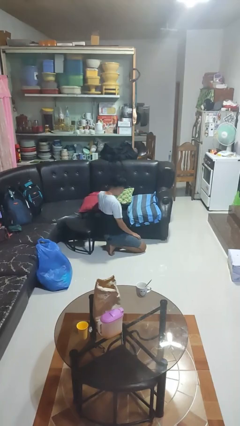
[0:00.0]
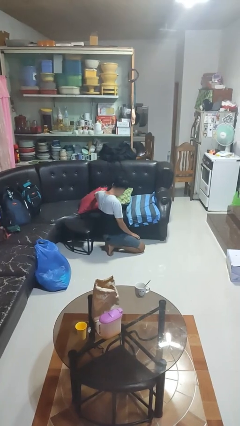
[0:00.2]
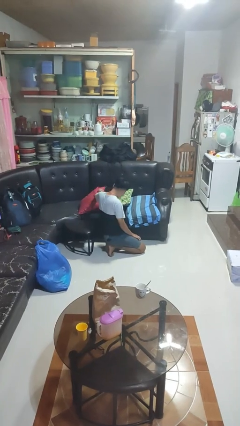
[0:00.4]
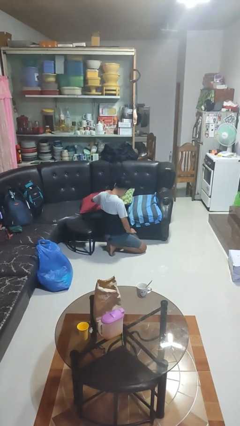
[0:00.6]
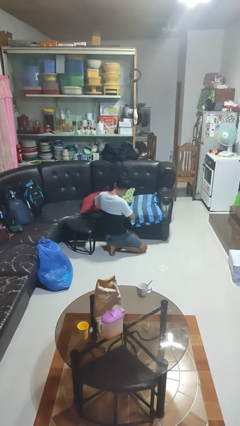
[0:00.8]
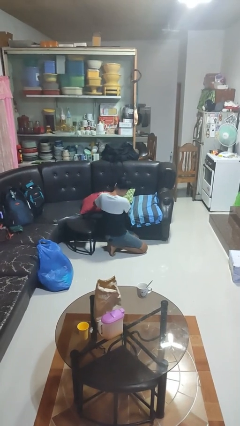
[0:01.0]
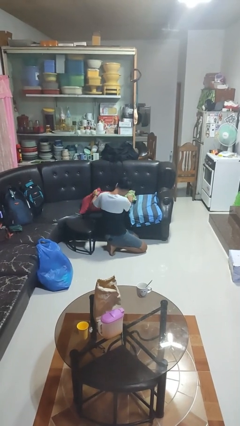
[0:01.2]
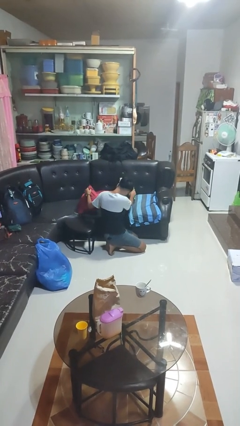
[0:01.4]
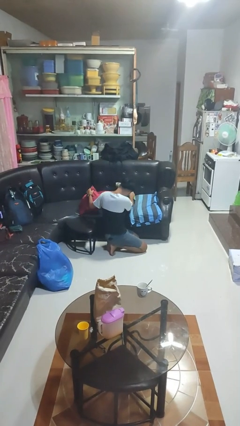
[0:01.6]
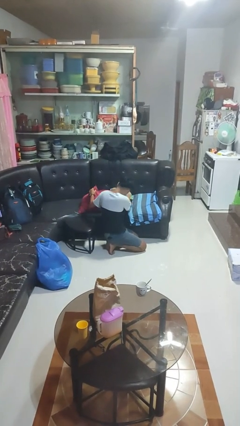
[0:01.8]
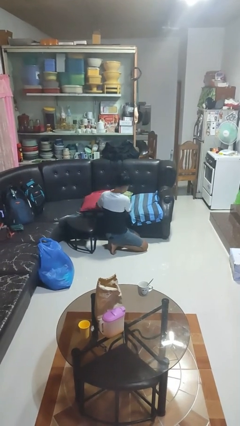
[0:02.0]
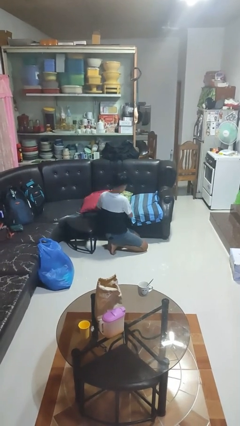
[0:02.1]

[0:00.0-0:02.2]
person searches in couch

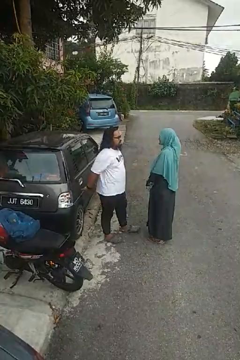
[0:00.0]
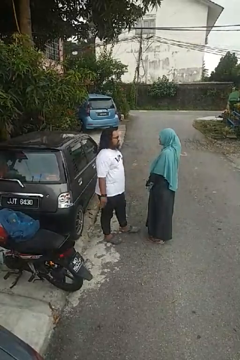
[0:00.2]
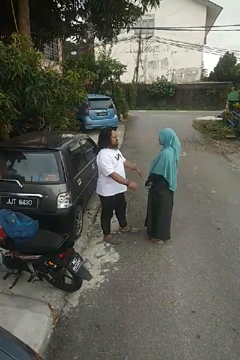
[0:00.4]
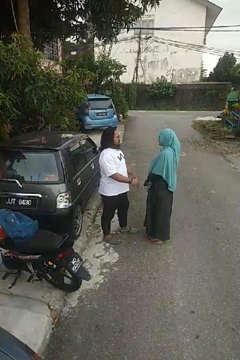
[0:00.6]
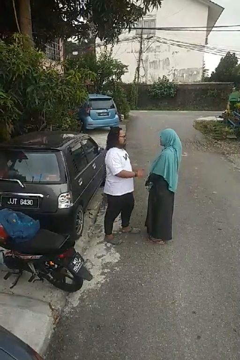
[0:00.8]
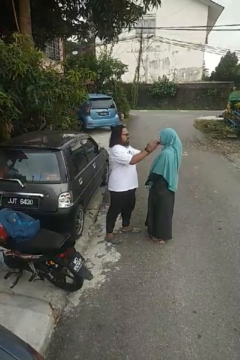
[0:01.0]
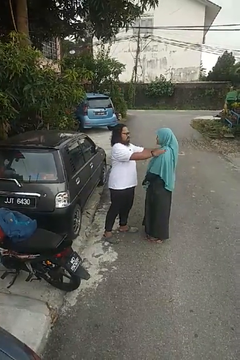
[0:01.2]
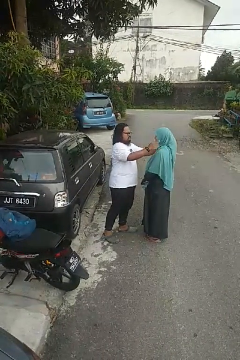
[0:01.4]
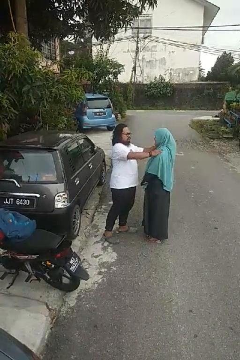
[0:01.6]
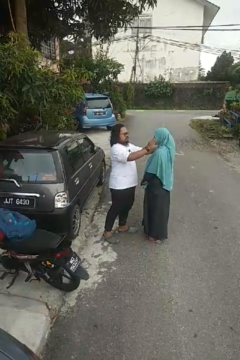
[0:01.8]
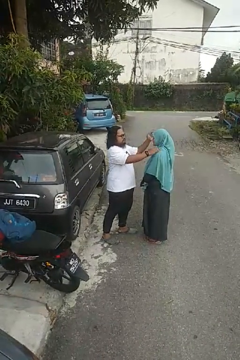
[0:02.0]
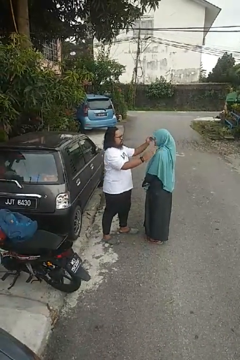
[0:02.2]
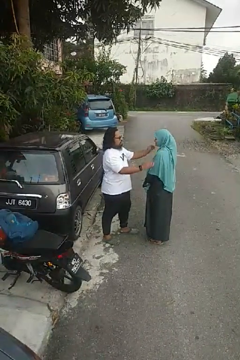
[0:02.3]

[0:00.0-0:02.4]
person pounds shoulders of person

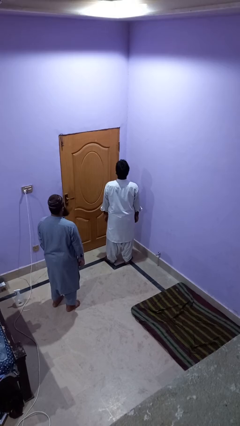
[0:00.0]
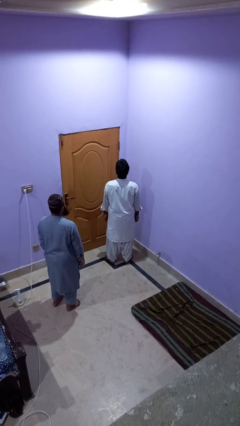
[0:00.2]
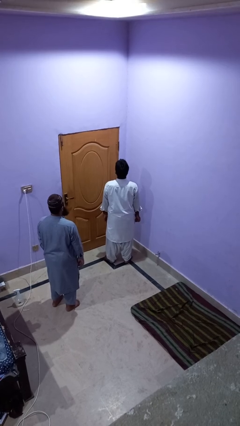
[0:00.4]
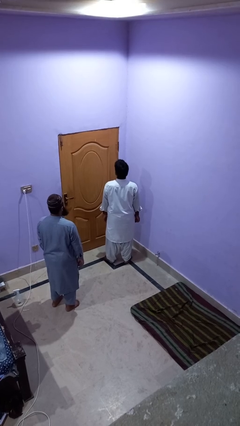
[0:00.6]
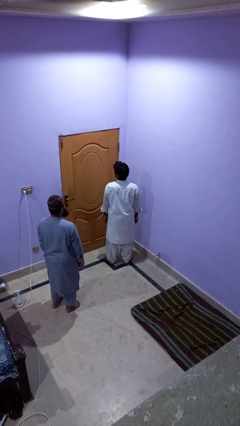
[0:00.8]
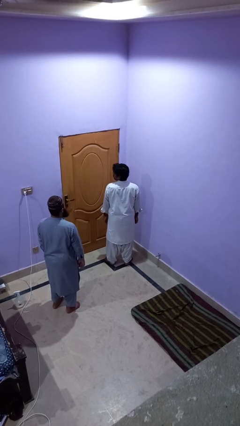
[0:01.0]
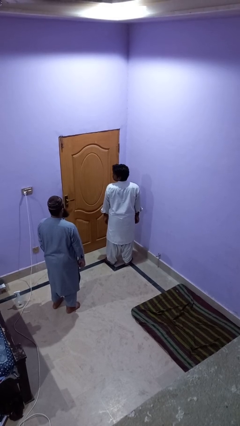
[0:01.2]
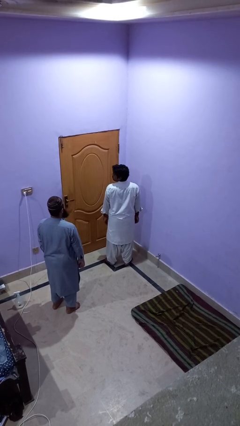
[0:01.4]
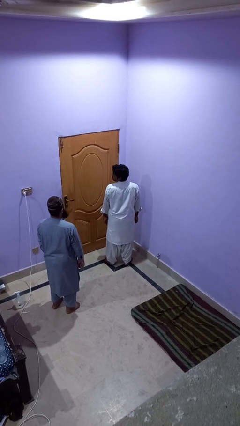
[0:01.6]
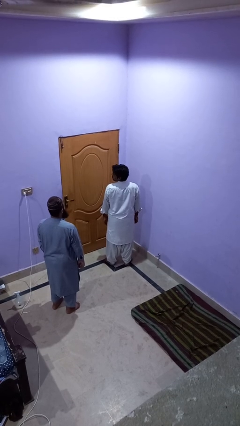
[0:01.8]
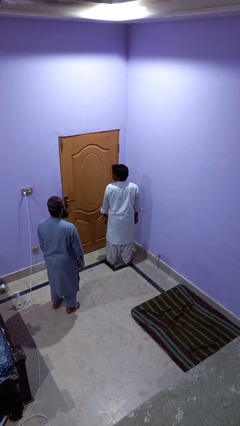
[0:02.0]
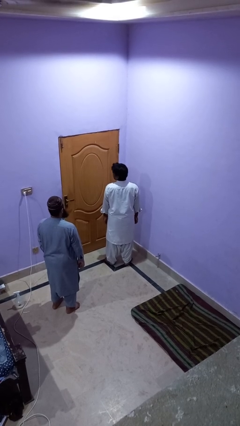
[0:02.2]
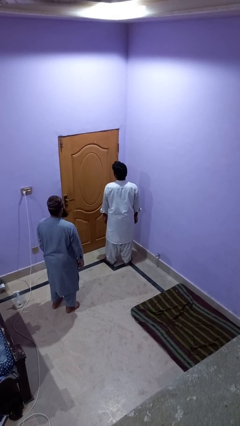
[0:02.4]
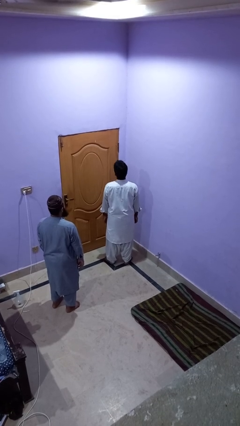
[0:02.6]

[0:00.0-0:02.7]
person looks over shoulder

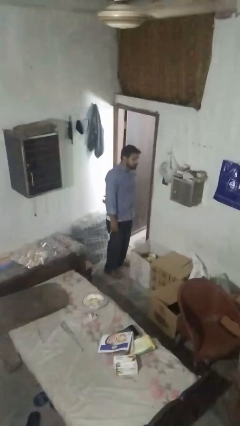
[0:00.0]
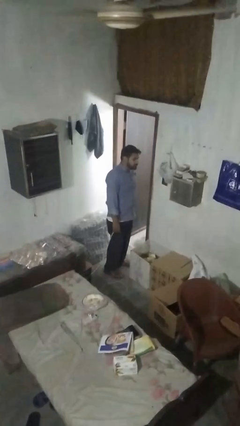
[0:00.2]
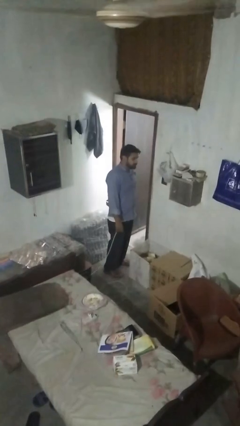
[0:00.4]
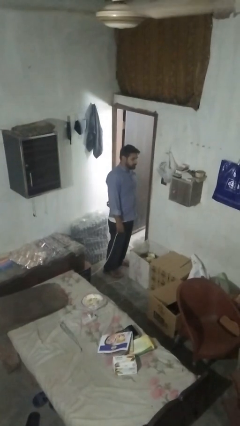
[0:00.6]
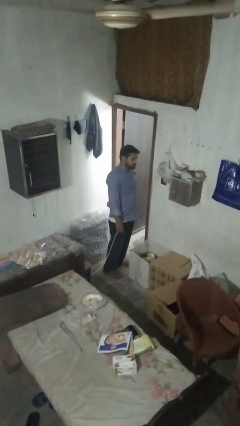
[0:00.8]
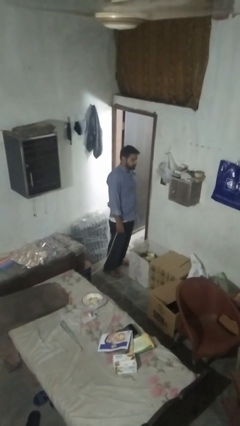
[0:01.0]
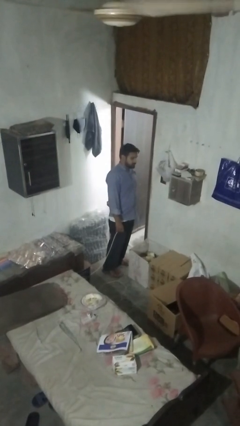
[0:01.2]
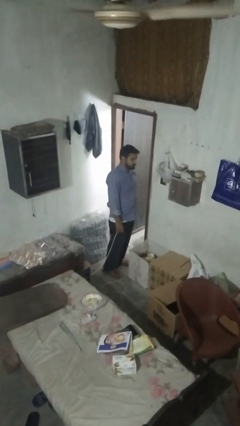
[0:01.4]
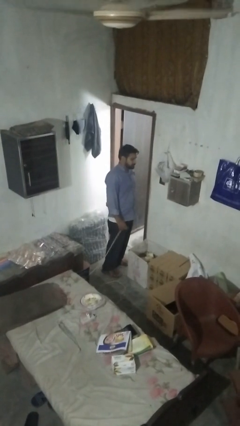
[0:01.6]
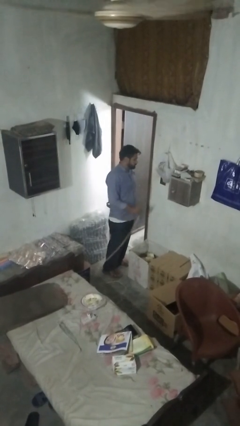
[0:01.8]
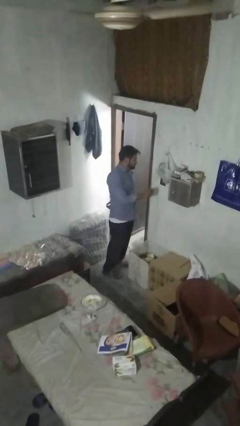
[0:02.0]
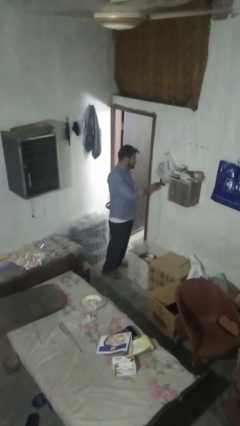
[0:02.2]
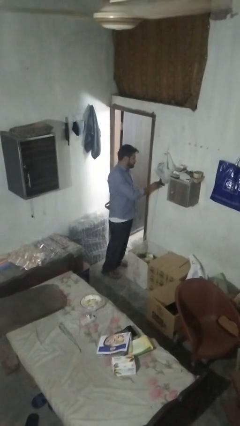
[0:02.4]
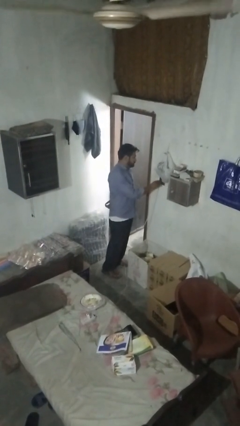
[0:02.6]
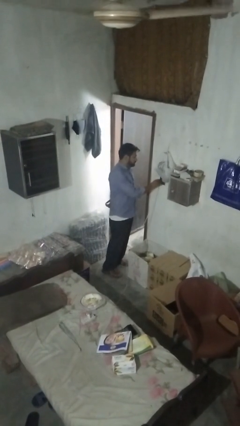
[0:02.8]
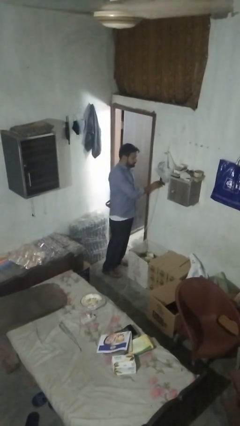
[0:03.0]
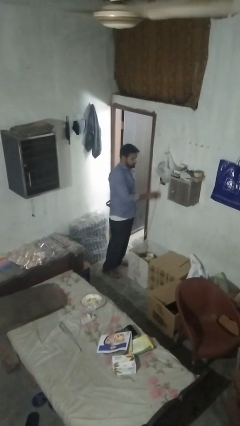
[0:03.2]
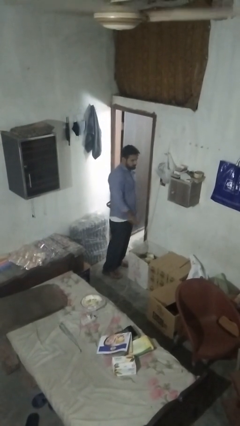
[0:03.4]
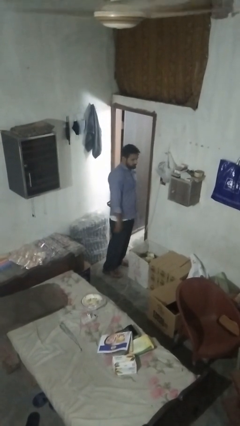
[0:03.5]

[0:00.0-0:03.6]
person plugs into electrical socket

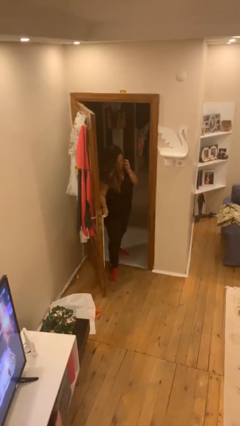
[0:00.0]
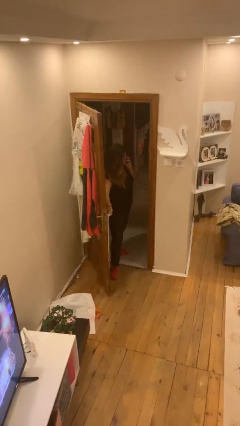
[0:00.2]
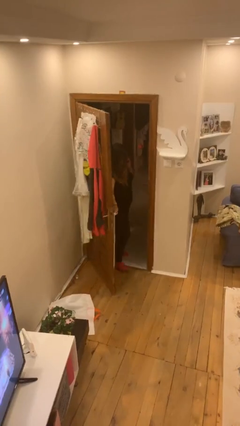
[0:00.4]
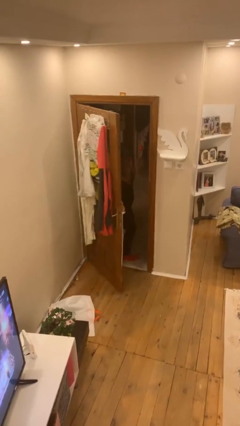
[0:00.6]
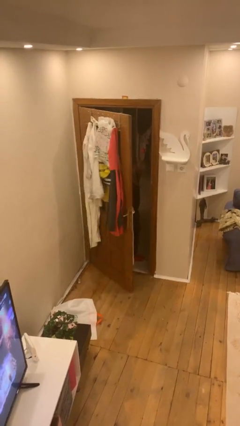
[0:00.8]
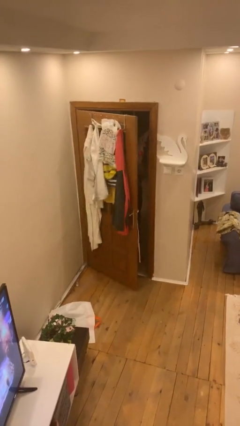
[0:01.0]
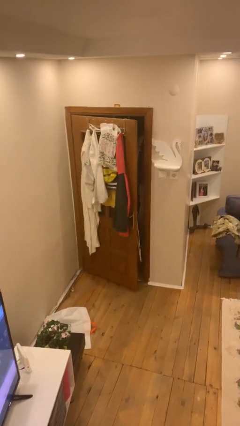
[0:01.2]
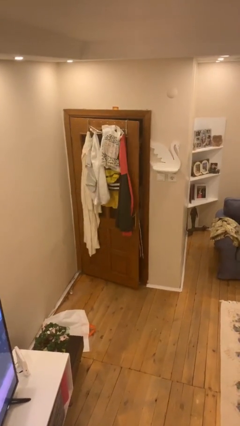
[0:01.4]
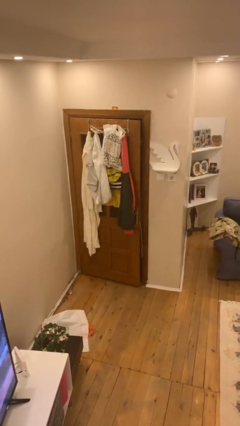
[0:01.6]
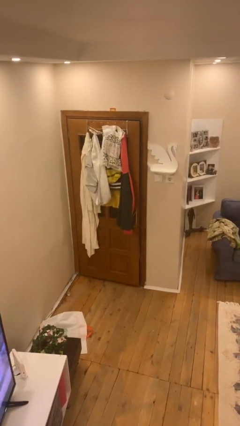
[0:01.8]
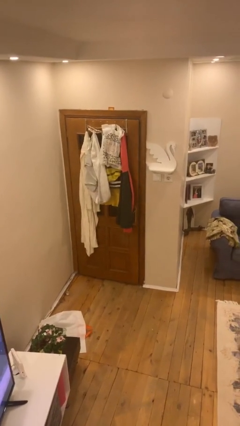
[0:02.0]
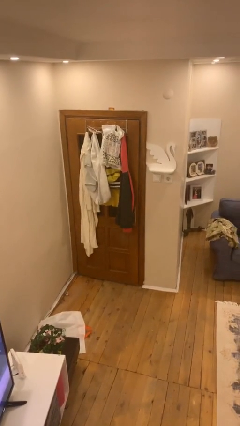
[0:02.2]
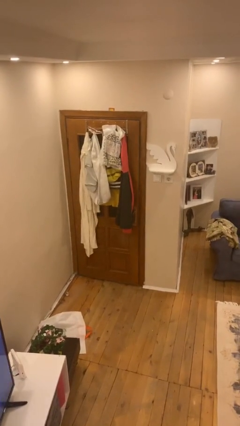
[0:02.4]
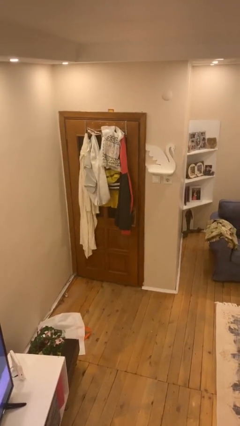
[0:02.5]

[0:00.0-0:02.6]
person closes facility door

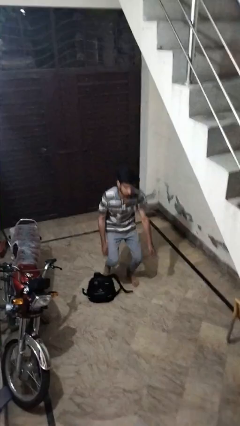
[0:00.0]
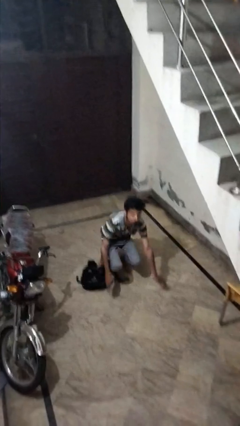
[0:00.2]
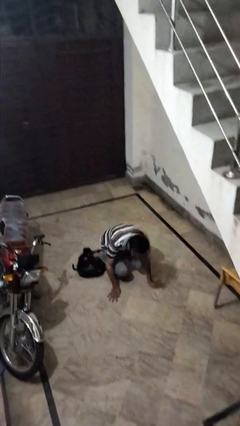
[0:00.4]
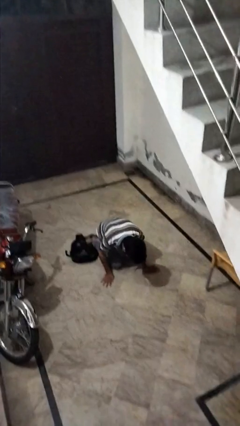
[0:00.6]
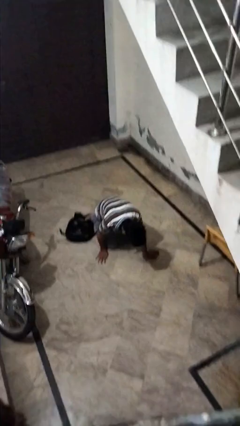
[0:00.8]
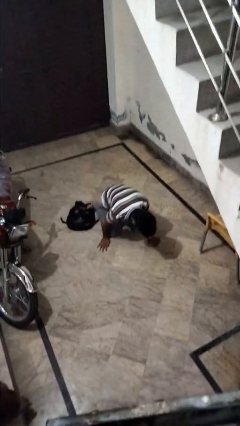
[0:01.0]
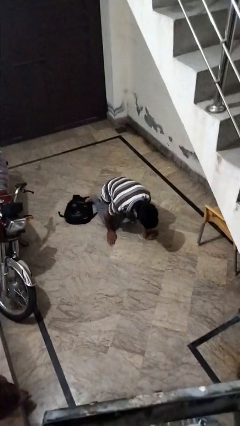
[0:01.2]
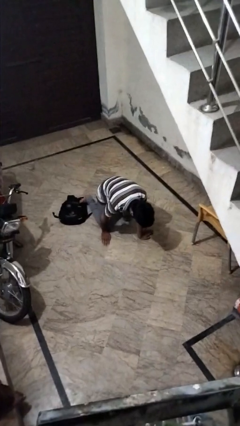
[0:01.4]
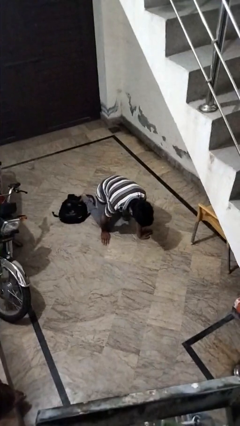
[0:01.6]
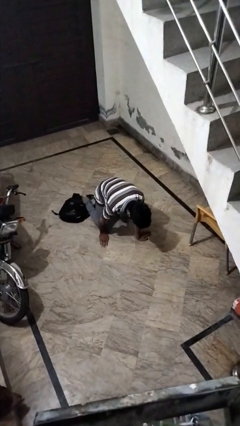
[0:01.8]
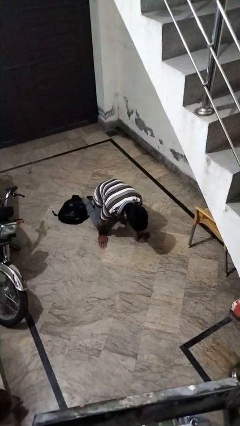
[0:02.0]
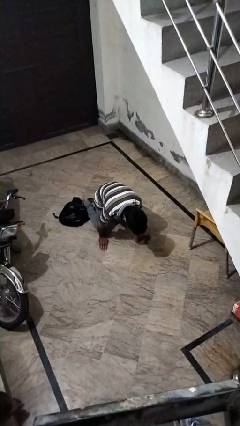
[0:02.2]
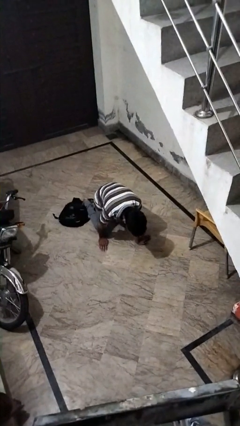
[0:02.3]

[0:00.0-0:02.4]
person trips on object on floor

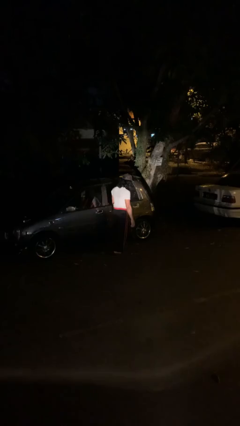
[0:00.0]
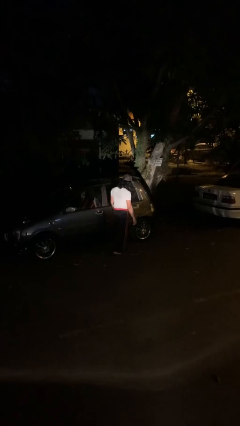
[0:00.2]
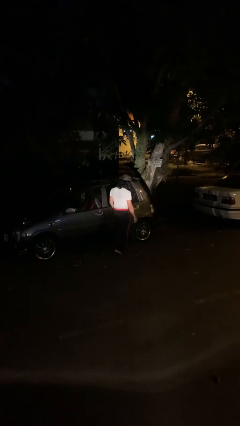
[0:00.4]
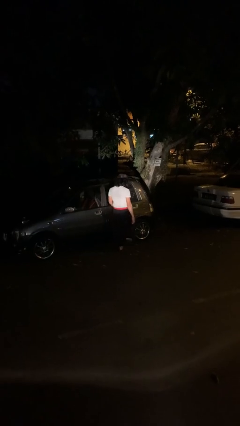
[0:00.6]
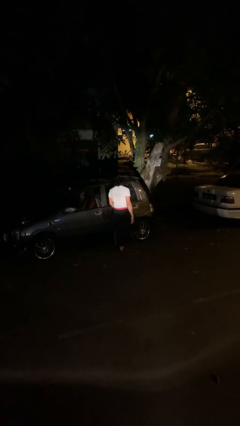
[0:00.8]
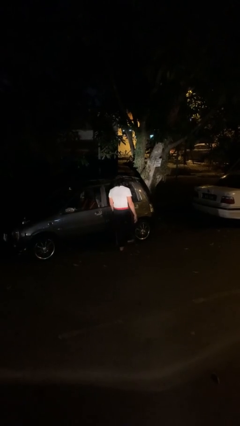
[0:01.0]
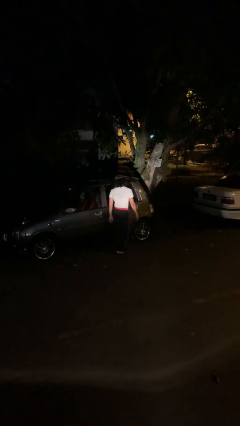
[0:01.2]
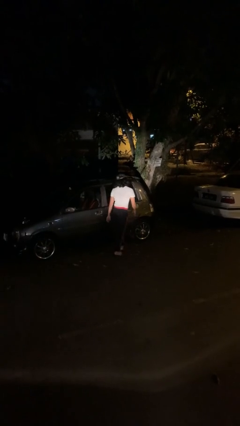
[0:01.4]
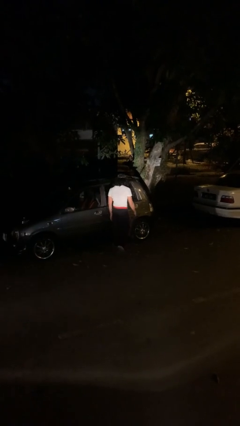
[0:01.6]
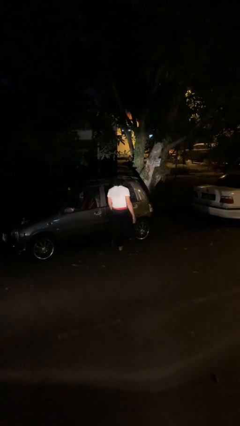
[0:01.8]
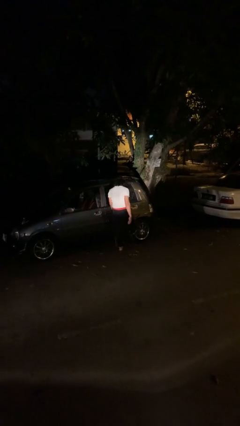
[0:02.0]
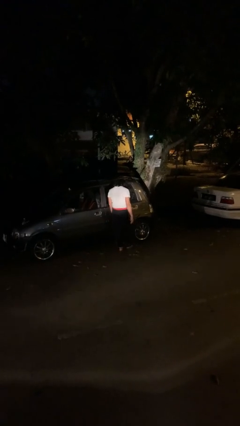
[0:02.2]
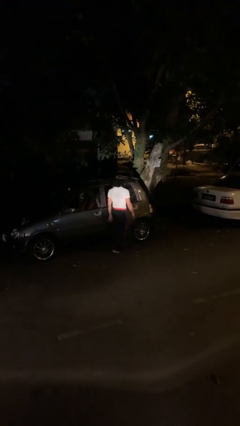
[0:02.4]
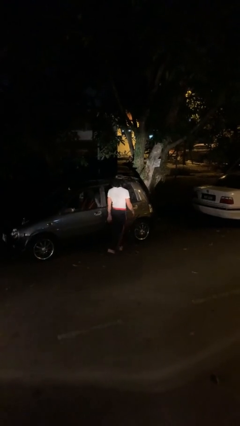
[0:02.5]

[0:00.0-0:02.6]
person kicks car tires
